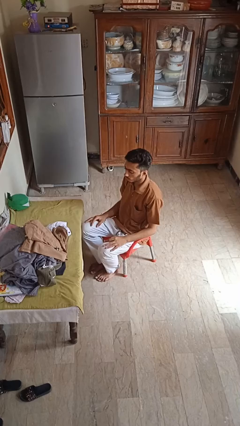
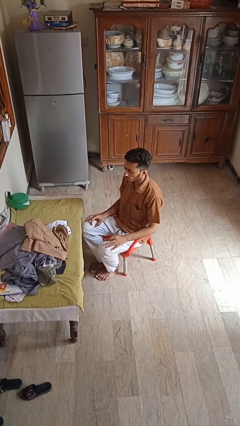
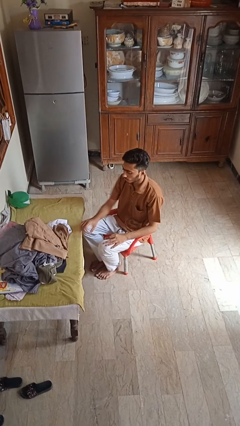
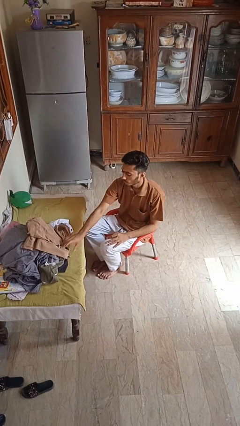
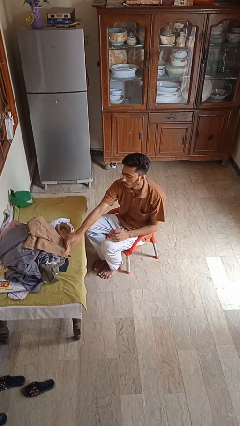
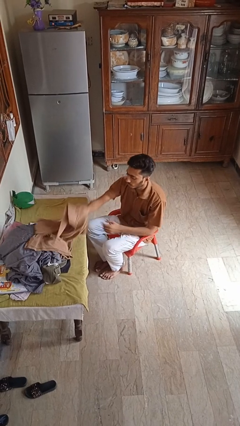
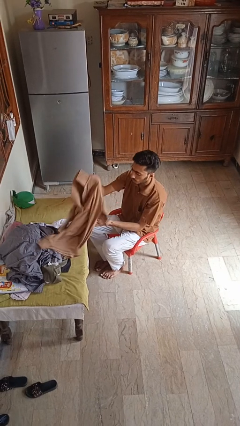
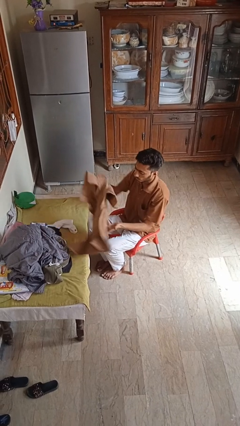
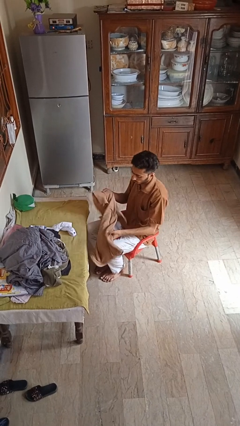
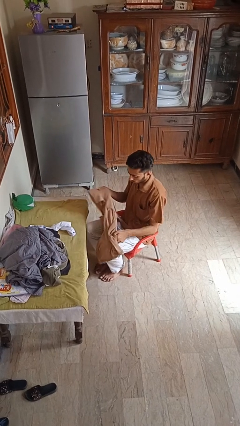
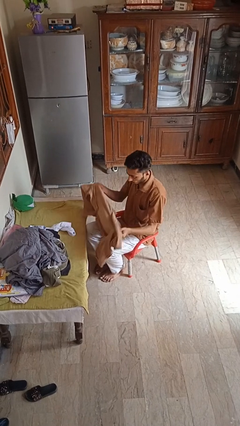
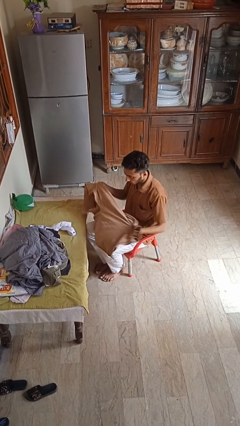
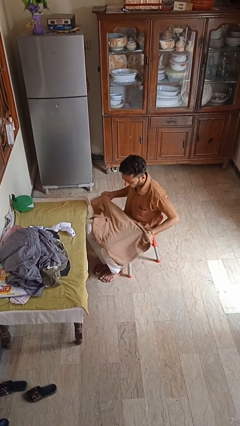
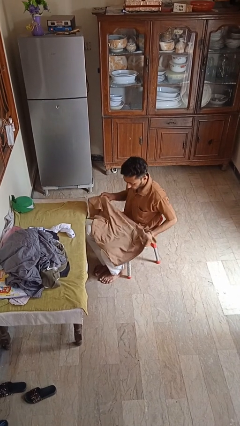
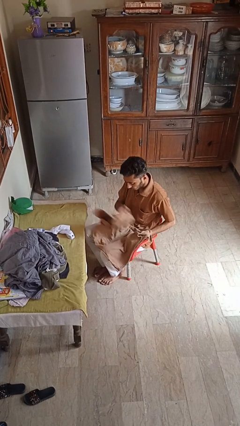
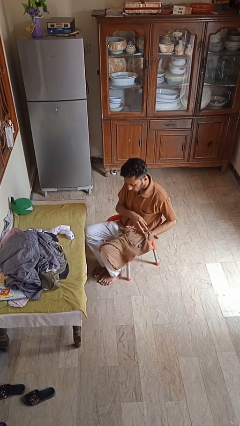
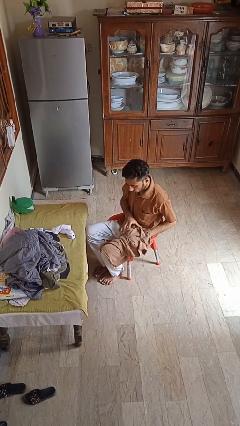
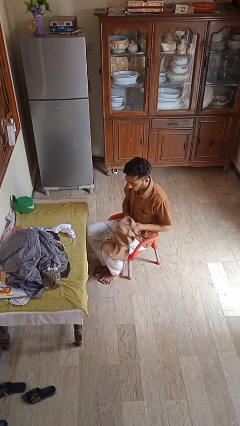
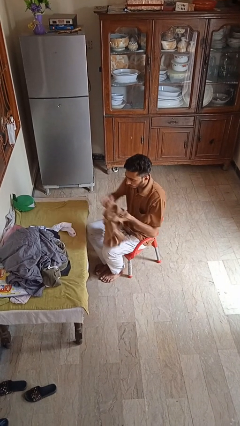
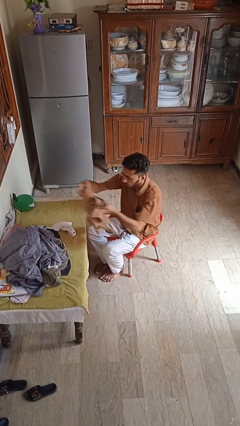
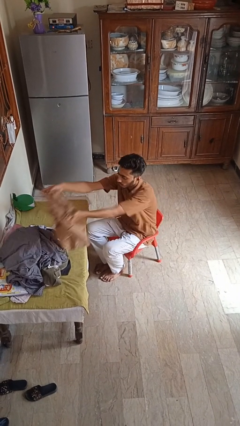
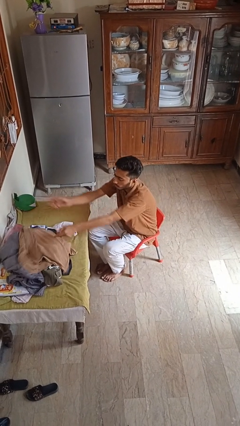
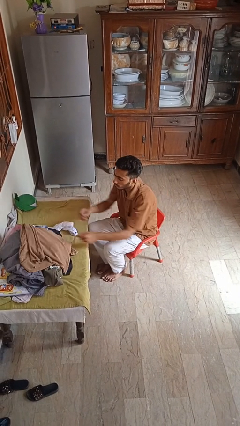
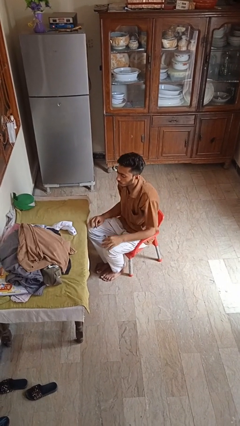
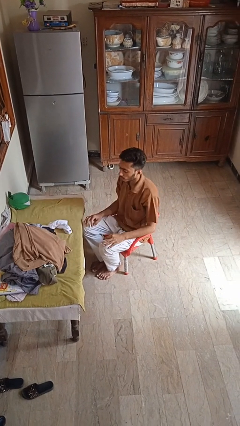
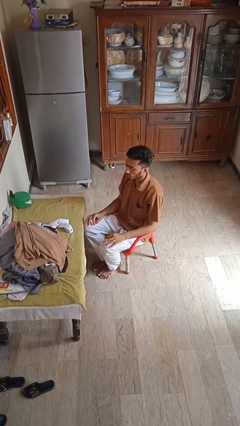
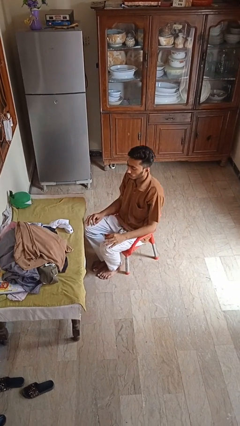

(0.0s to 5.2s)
person folds shirt

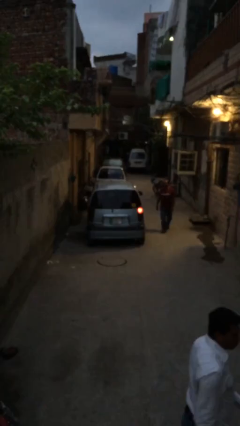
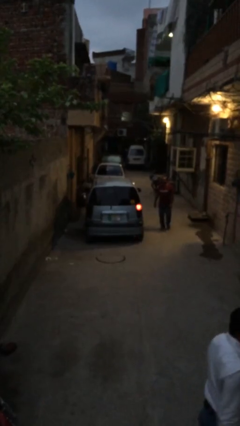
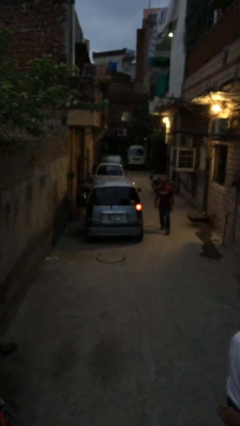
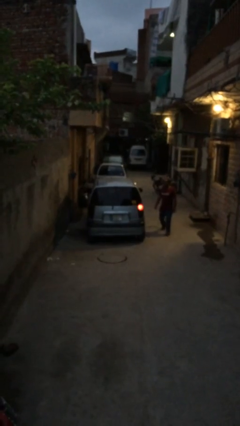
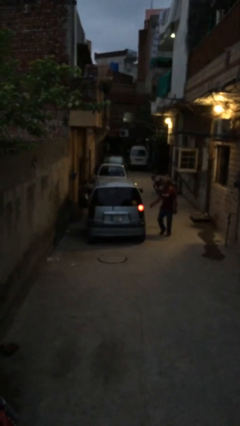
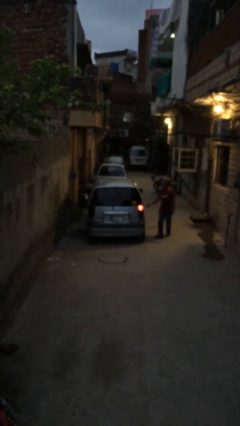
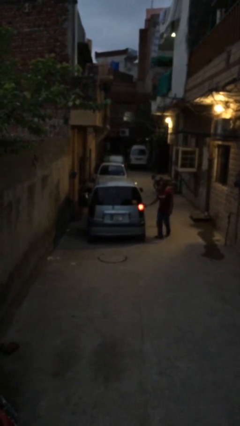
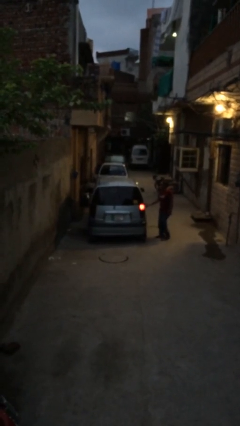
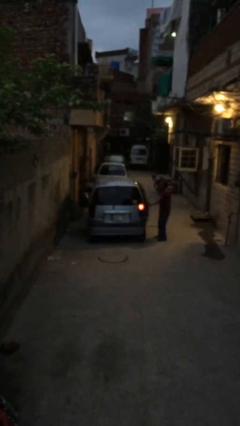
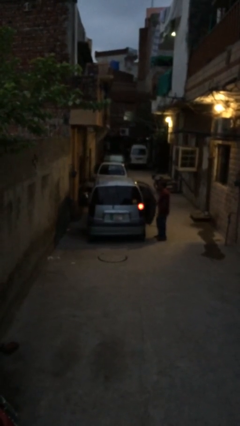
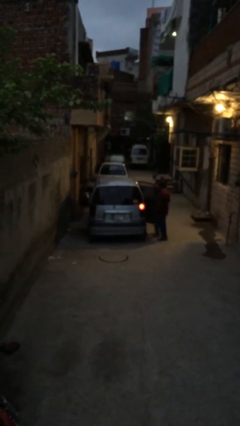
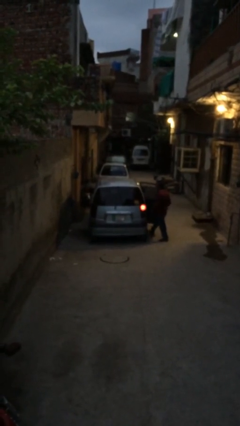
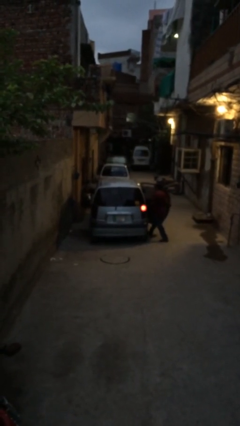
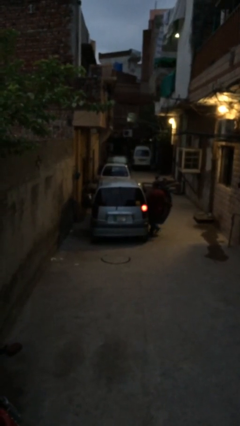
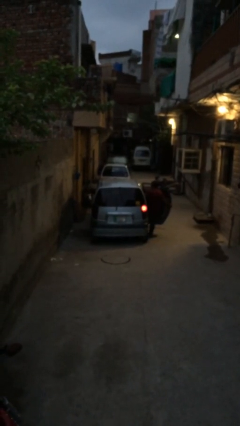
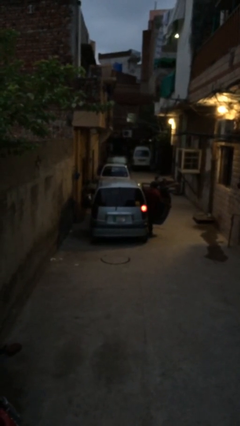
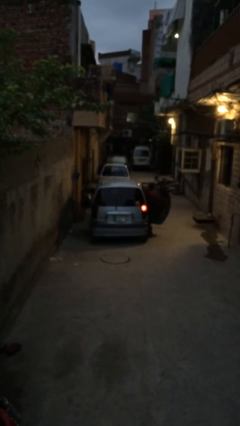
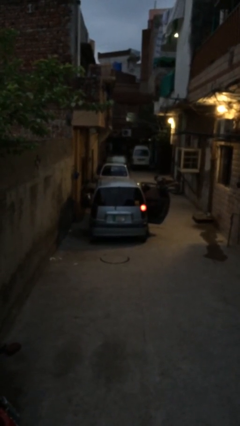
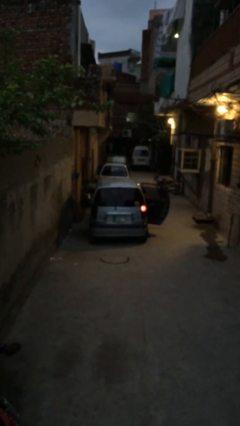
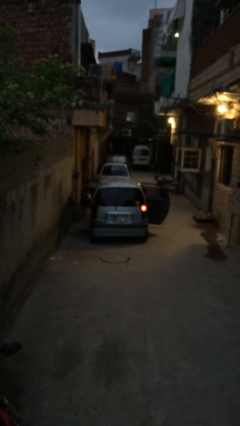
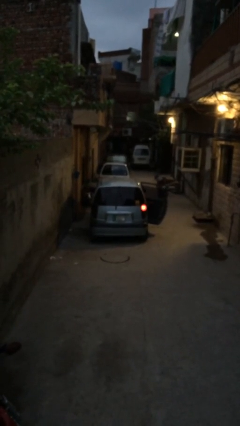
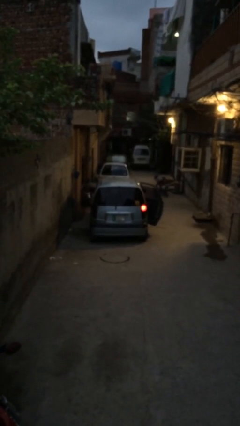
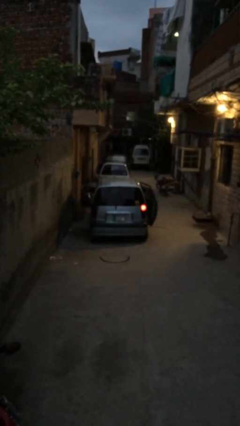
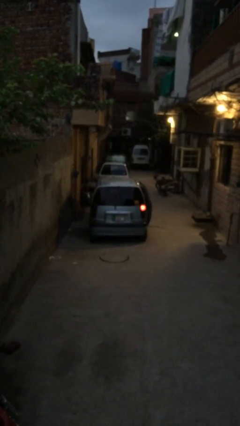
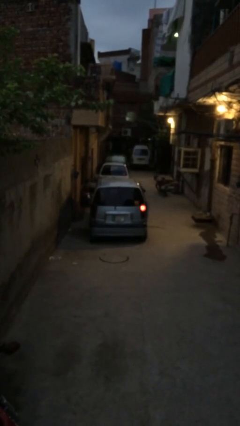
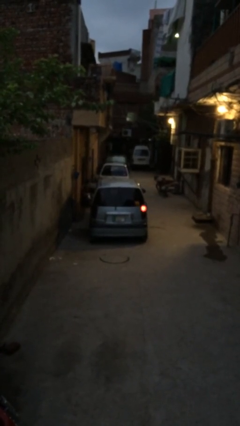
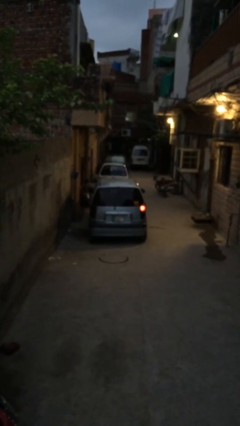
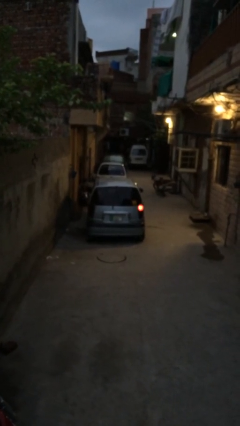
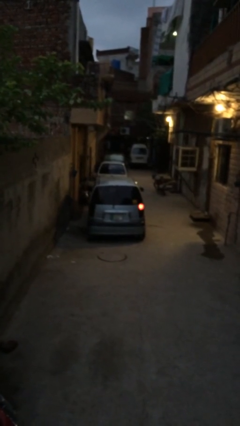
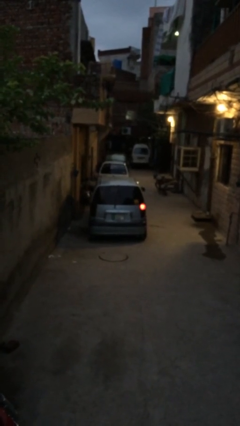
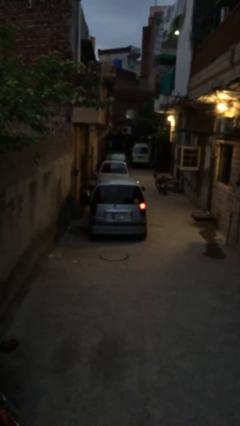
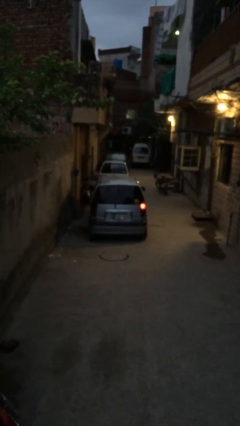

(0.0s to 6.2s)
car picks up person

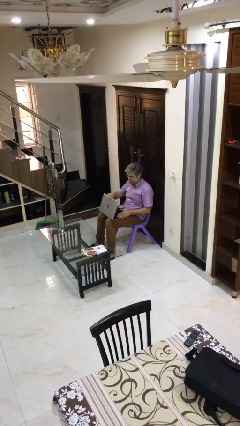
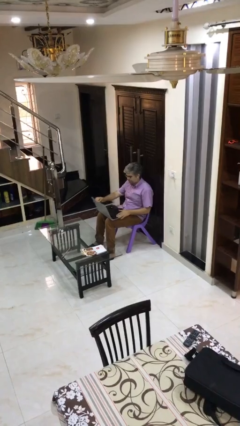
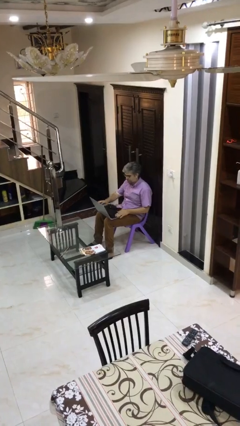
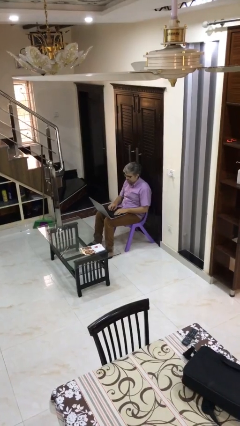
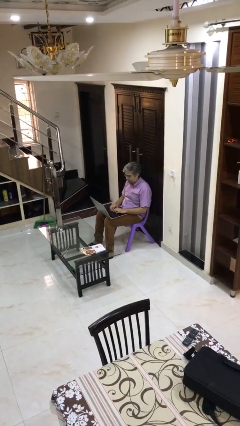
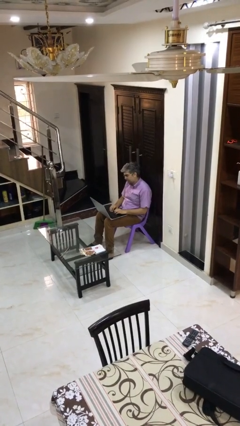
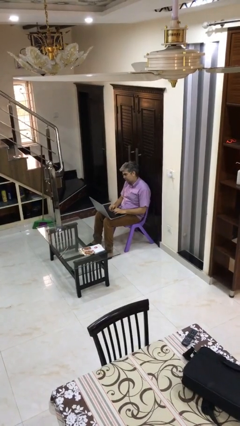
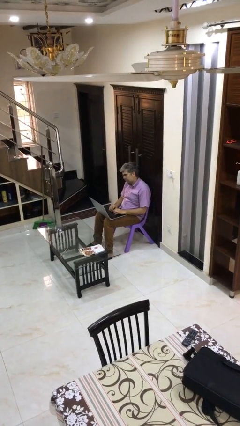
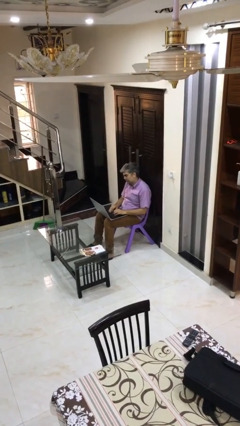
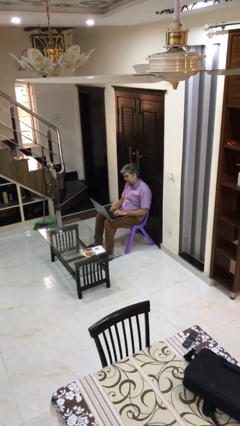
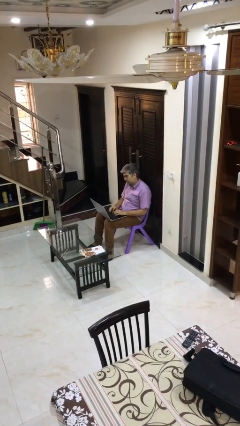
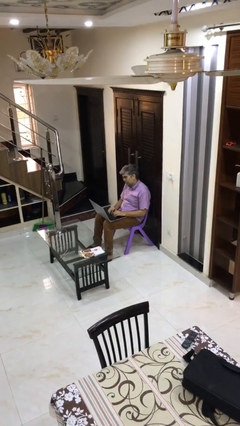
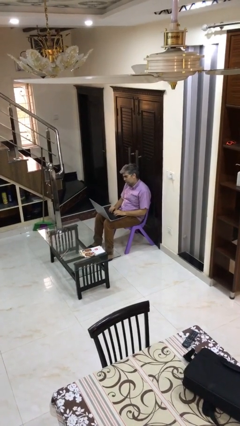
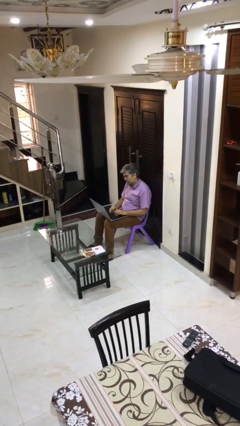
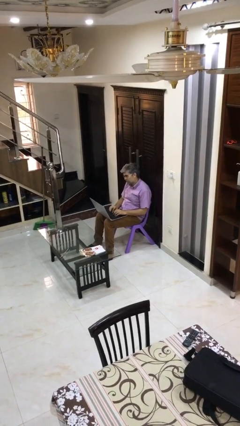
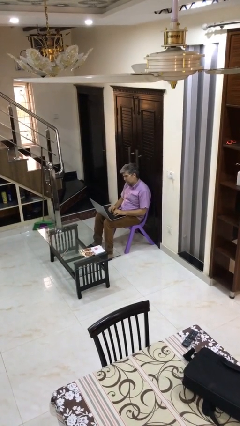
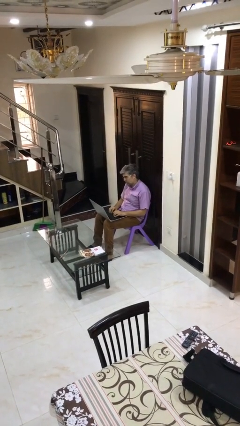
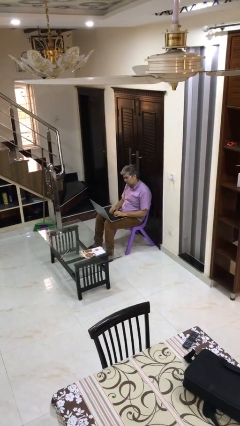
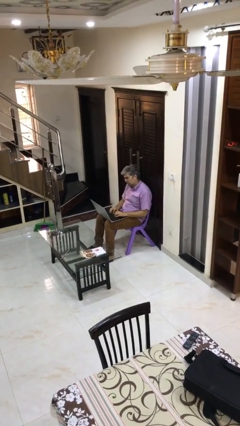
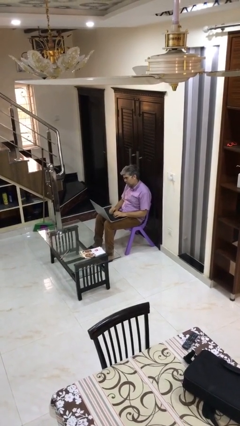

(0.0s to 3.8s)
person interacts with laptop

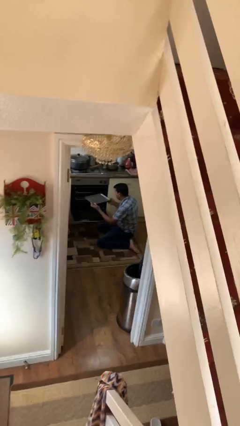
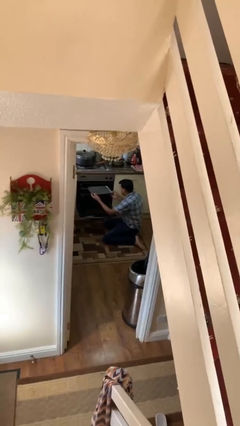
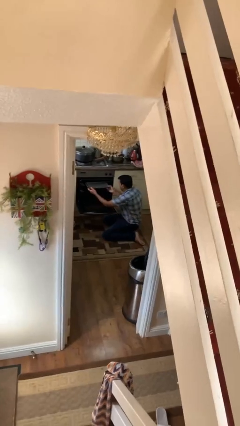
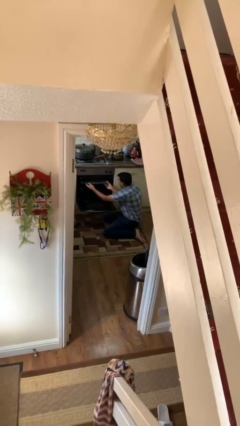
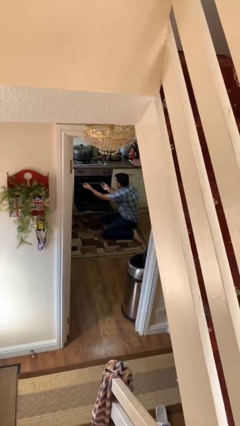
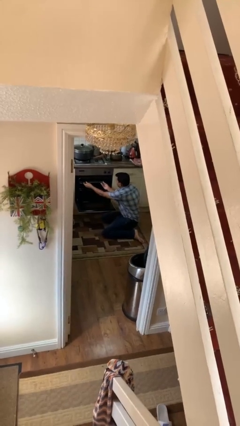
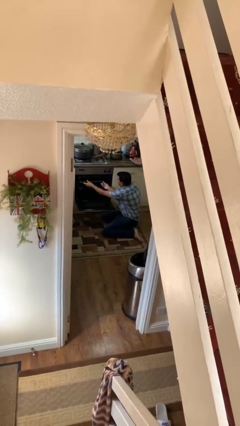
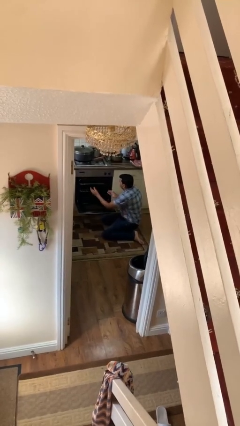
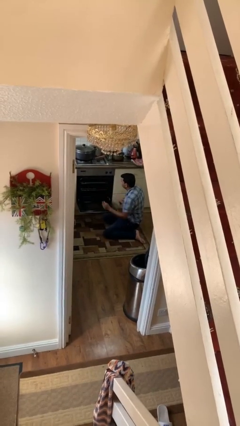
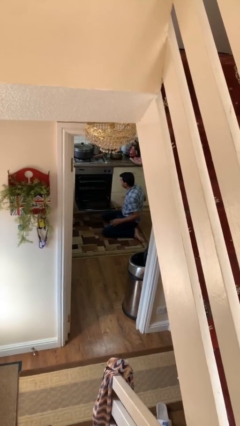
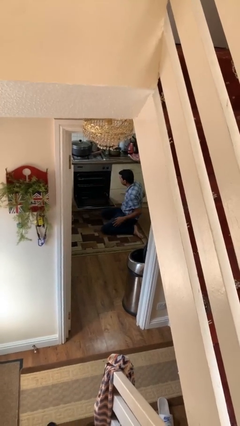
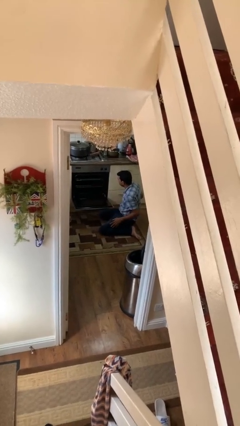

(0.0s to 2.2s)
person puts object into oven

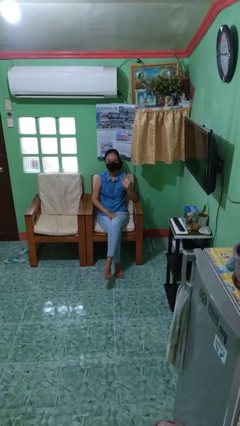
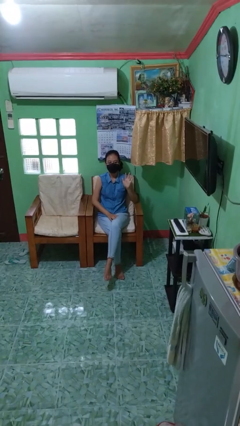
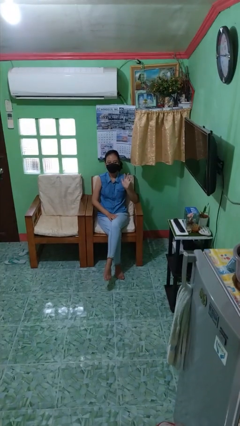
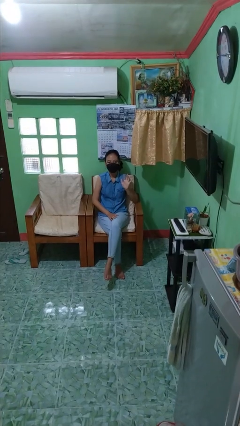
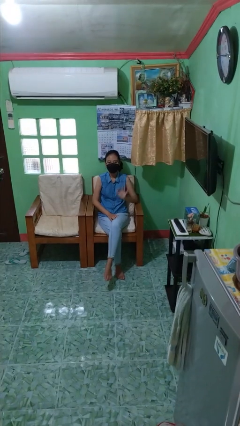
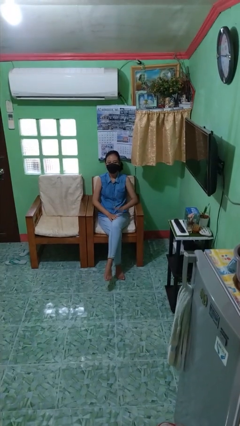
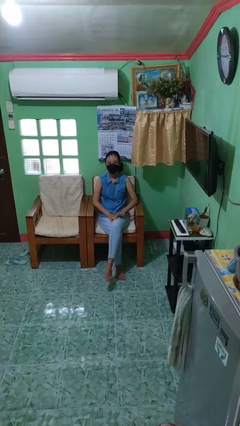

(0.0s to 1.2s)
person gestures number five
